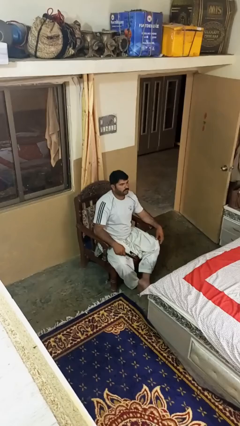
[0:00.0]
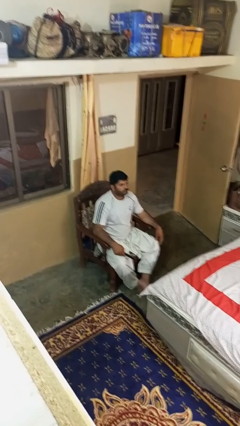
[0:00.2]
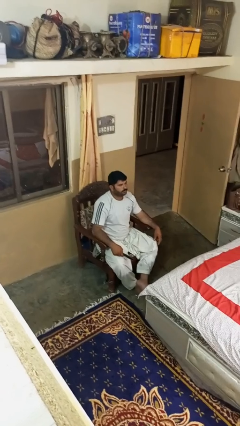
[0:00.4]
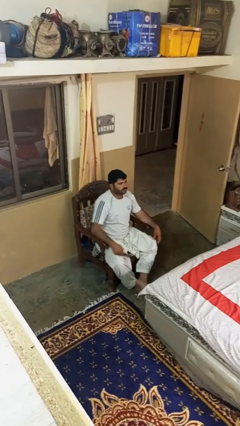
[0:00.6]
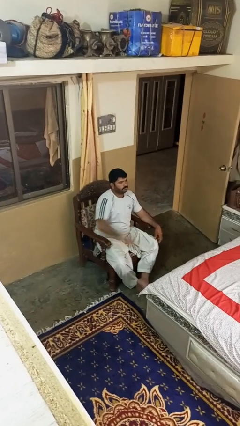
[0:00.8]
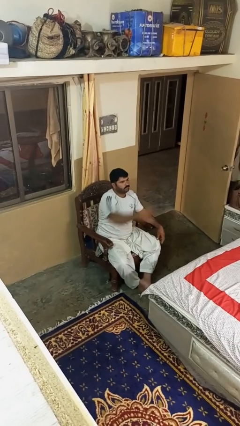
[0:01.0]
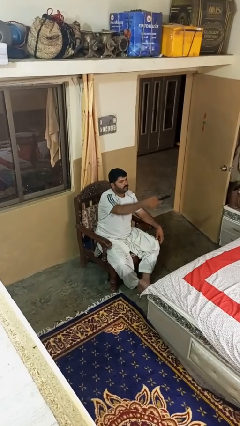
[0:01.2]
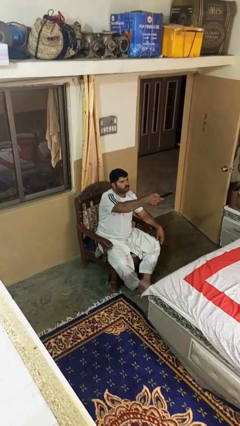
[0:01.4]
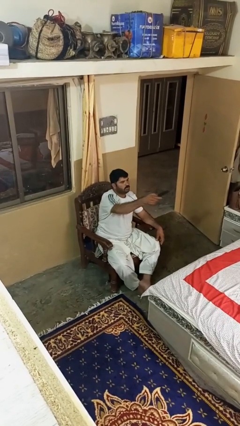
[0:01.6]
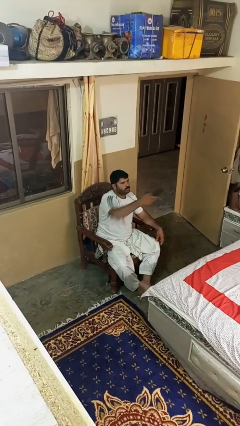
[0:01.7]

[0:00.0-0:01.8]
person uses television remote

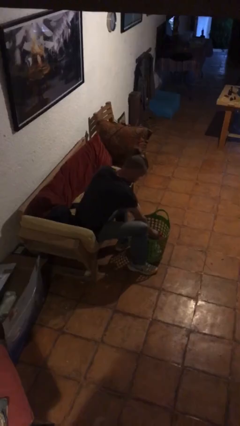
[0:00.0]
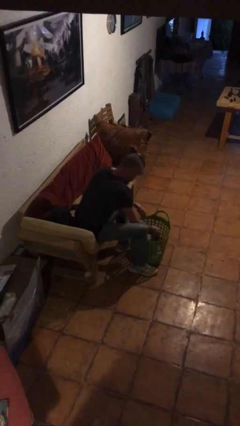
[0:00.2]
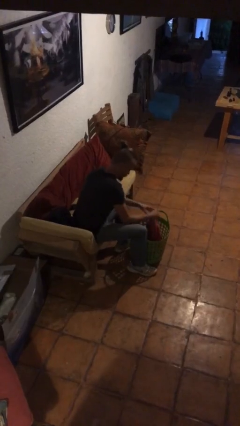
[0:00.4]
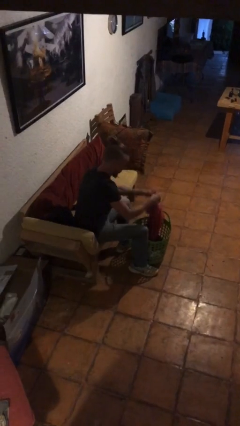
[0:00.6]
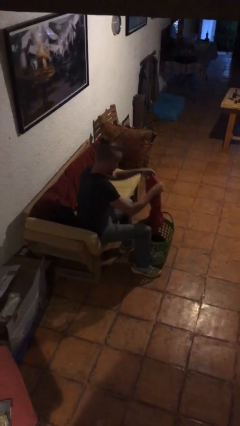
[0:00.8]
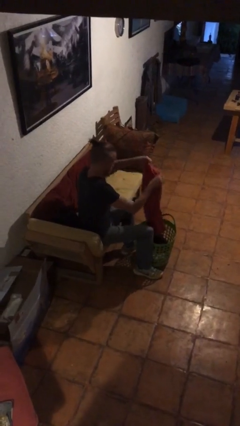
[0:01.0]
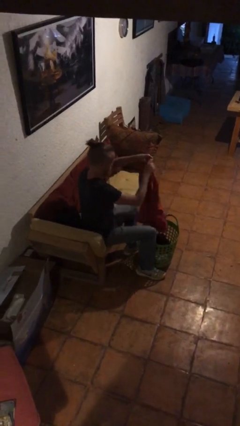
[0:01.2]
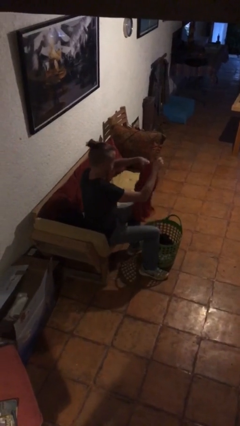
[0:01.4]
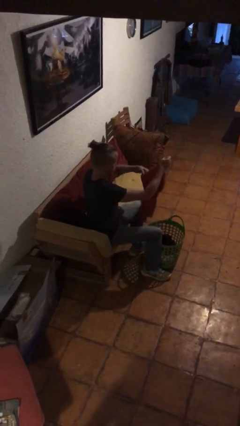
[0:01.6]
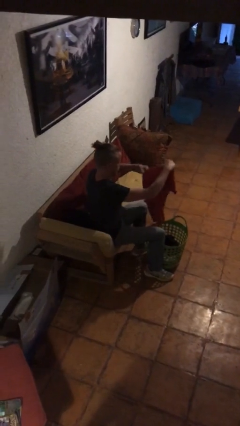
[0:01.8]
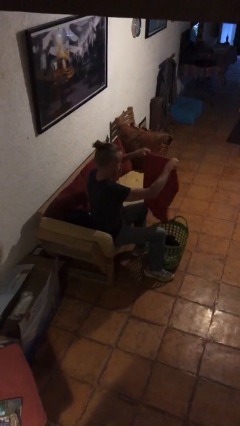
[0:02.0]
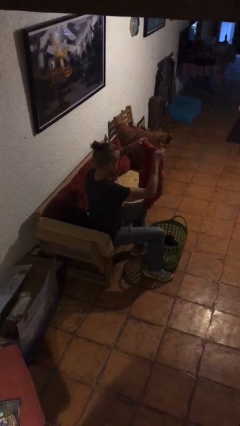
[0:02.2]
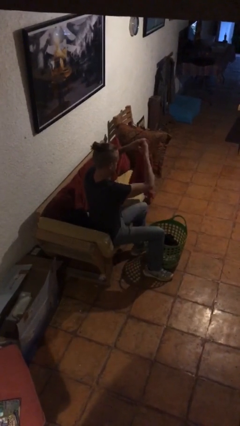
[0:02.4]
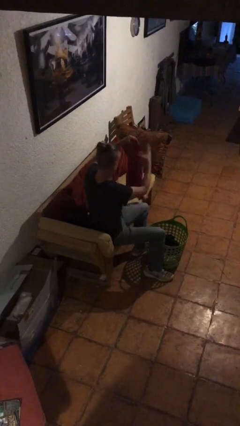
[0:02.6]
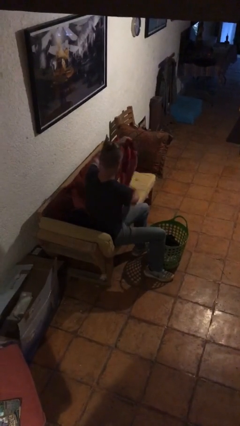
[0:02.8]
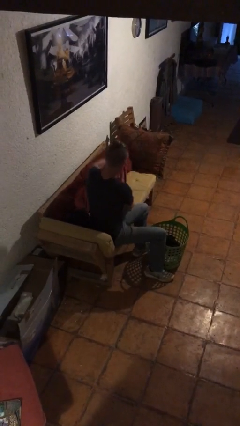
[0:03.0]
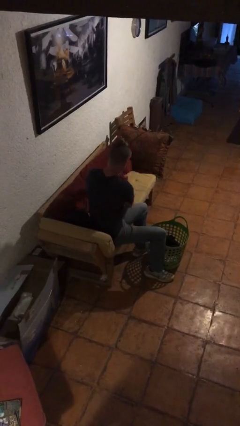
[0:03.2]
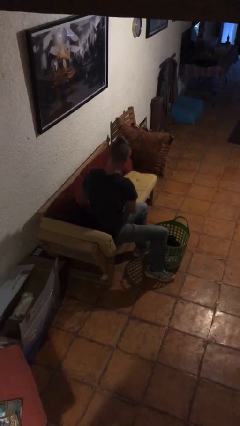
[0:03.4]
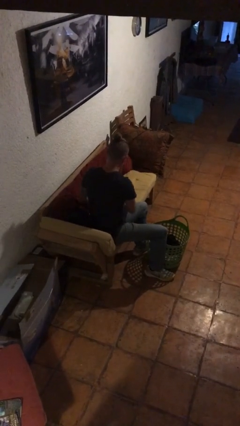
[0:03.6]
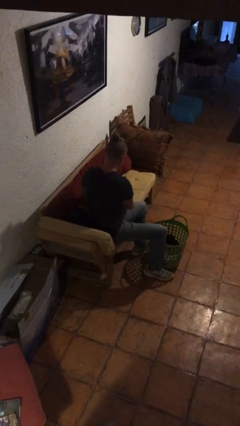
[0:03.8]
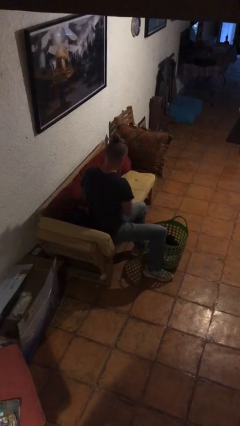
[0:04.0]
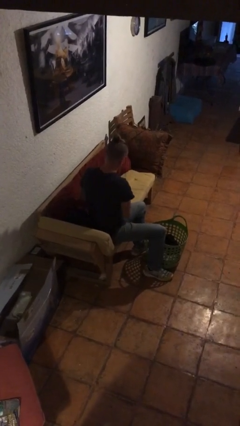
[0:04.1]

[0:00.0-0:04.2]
person folds shirt

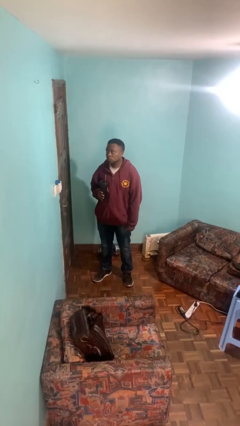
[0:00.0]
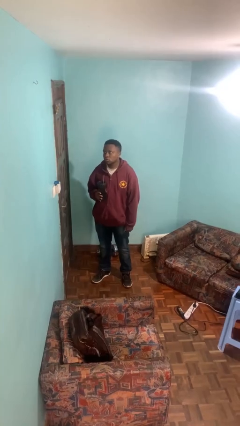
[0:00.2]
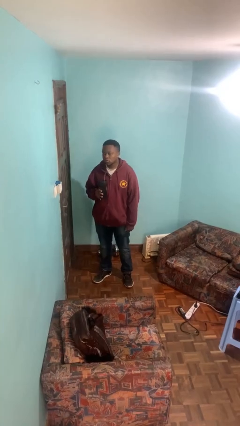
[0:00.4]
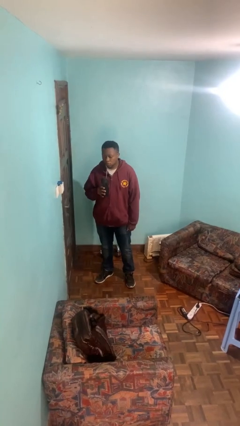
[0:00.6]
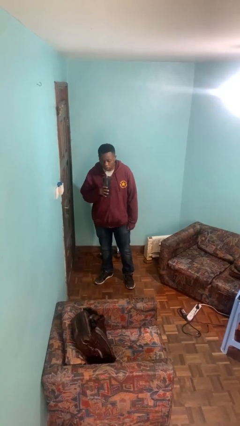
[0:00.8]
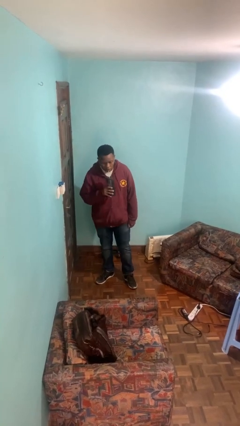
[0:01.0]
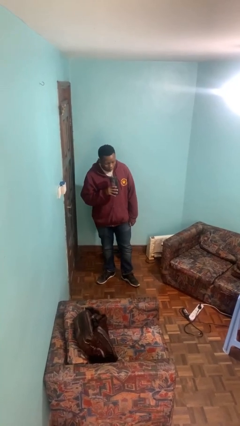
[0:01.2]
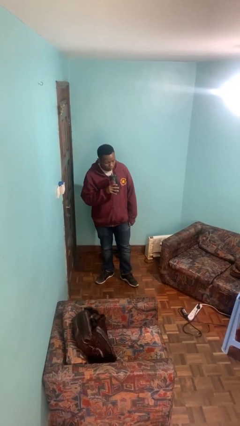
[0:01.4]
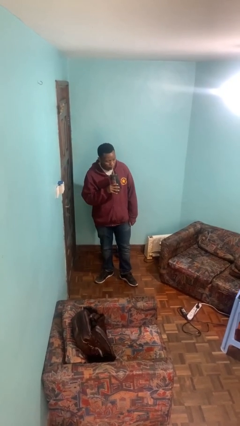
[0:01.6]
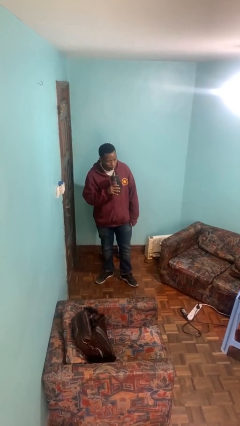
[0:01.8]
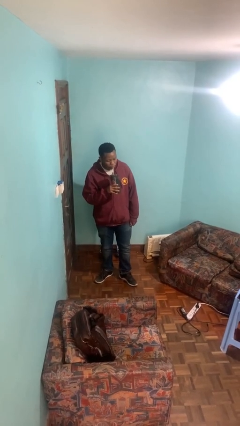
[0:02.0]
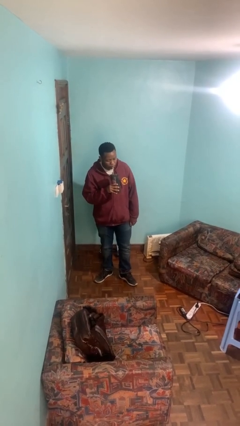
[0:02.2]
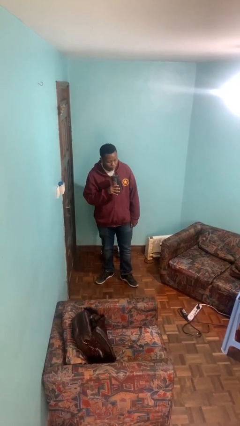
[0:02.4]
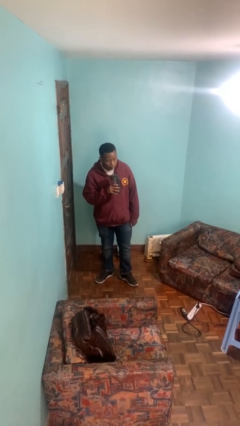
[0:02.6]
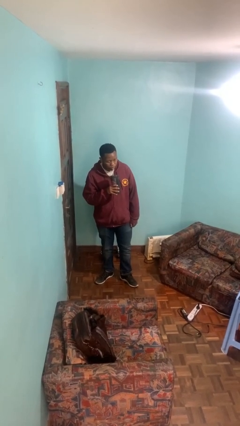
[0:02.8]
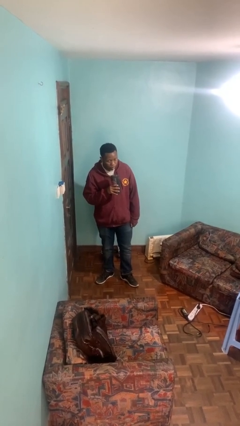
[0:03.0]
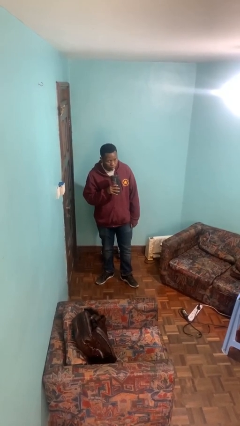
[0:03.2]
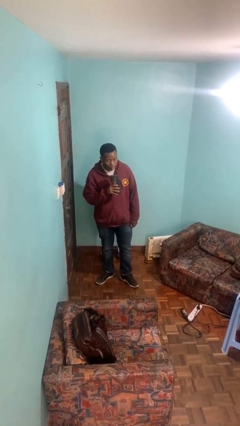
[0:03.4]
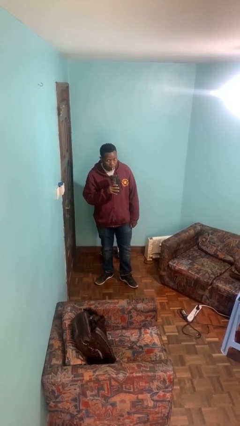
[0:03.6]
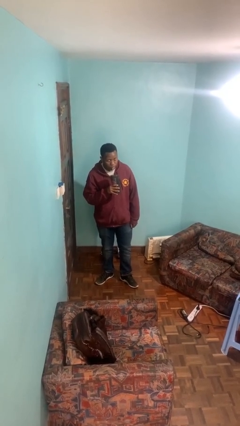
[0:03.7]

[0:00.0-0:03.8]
person drinks from straw

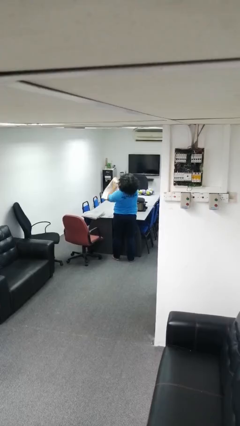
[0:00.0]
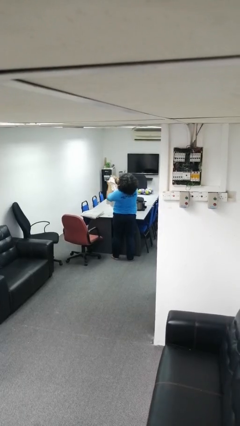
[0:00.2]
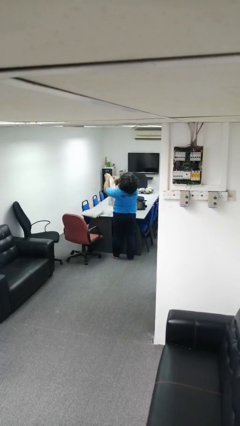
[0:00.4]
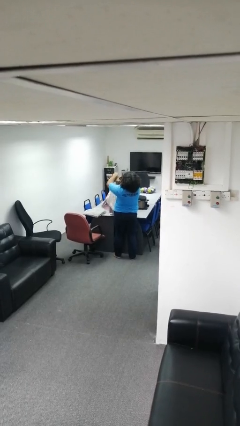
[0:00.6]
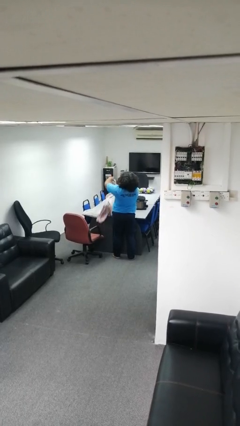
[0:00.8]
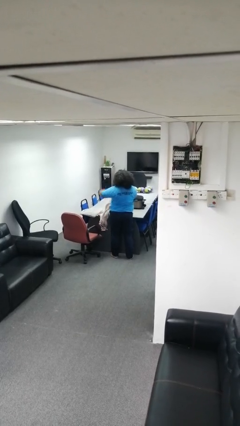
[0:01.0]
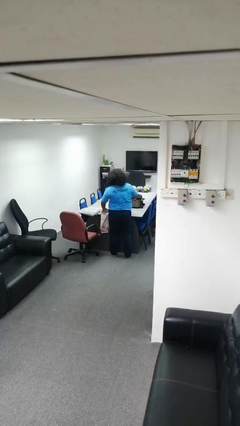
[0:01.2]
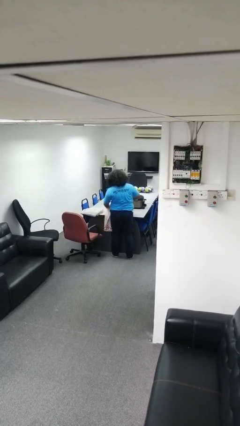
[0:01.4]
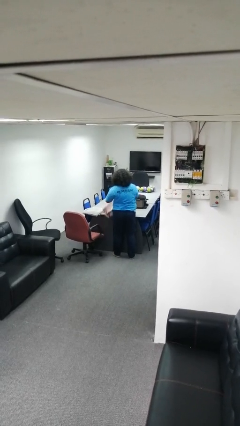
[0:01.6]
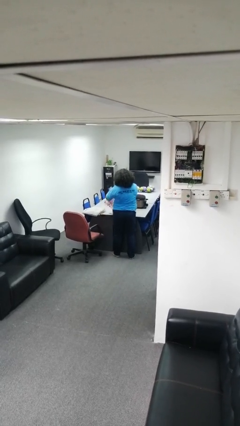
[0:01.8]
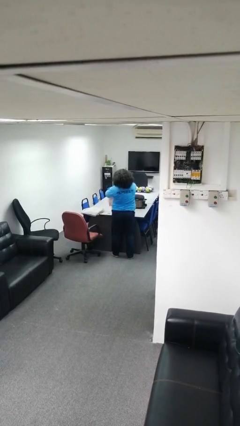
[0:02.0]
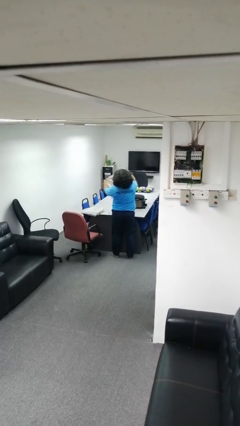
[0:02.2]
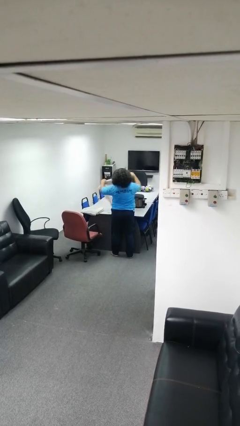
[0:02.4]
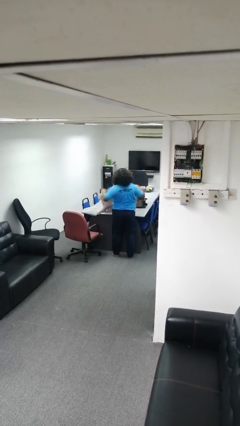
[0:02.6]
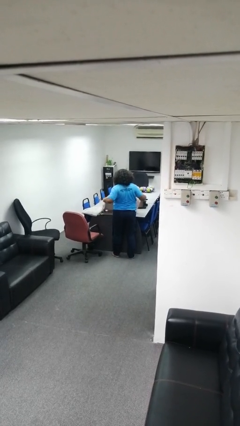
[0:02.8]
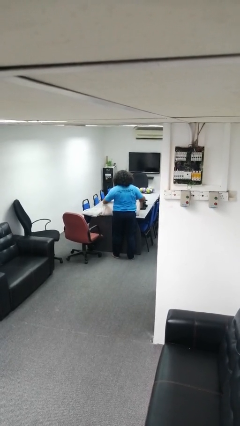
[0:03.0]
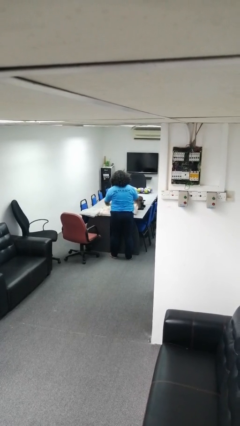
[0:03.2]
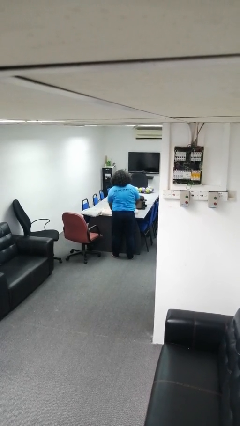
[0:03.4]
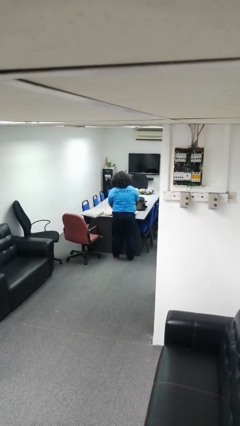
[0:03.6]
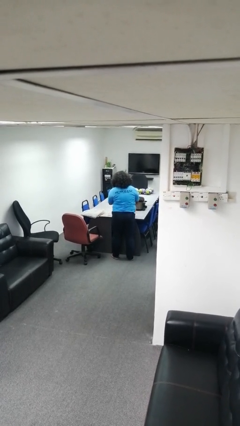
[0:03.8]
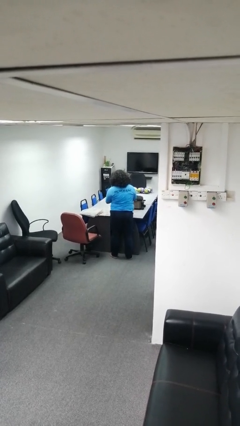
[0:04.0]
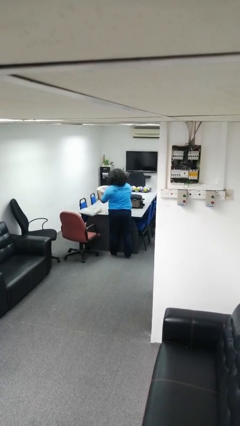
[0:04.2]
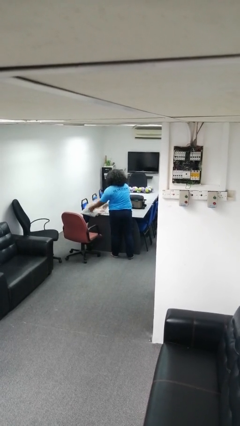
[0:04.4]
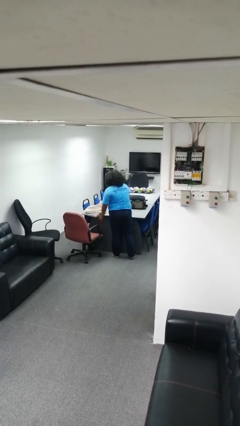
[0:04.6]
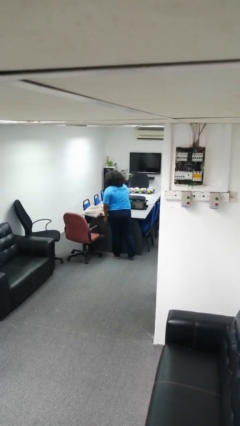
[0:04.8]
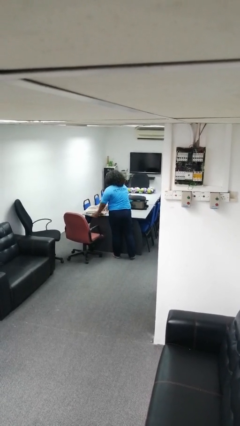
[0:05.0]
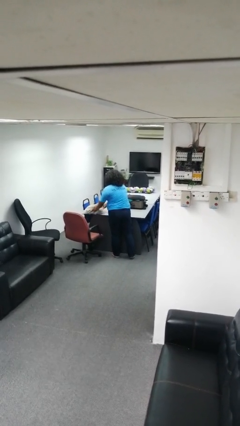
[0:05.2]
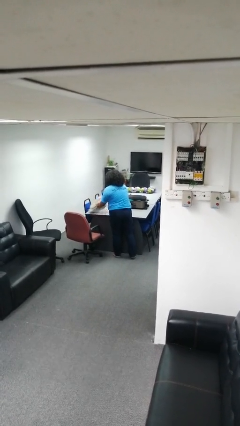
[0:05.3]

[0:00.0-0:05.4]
person folds towel

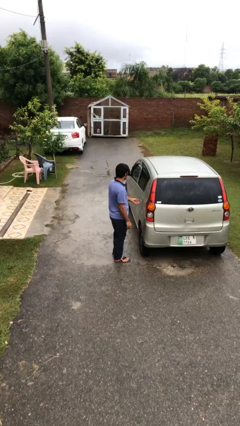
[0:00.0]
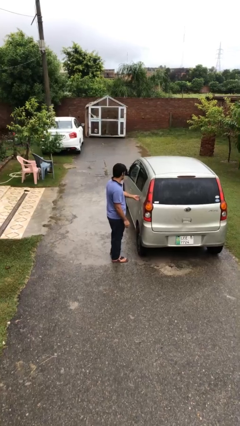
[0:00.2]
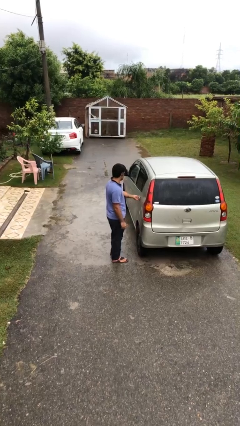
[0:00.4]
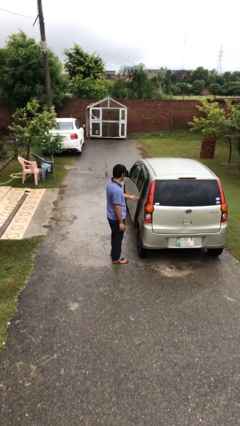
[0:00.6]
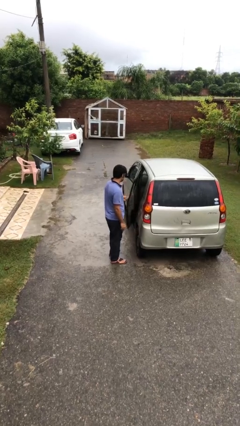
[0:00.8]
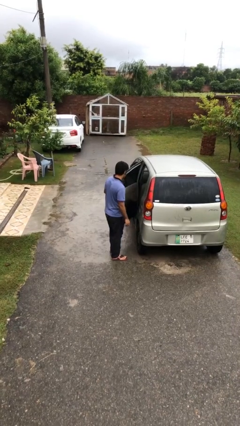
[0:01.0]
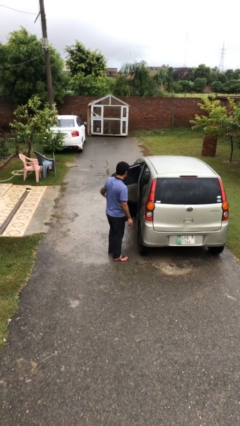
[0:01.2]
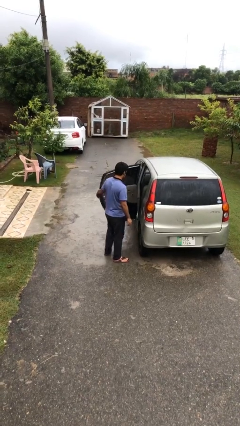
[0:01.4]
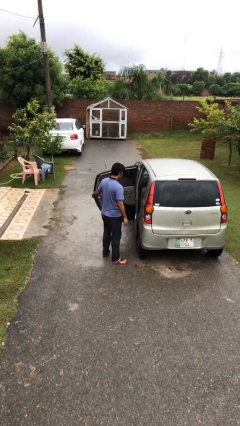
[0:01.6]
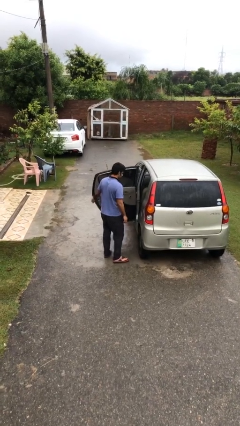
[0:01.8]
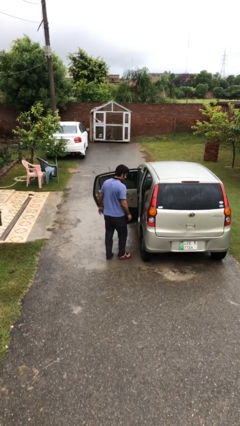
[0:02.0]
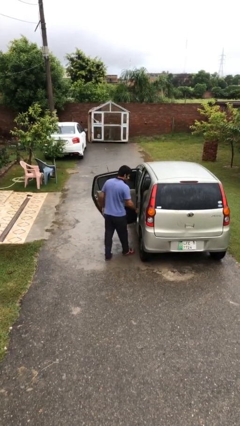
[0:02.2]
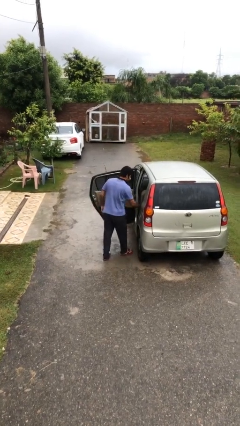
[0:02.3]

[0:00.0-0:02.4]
person opens car door
